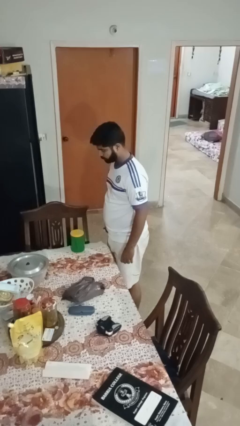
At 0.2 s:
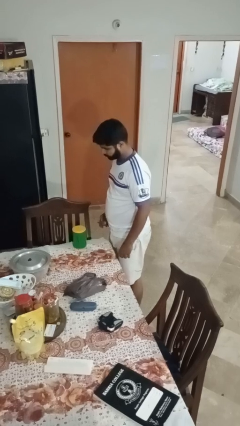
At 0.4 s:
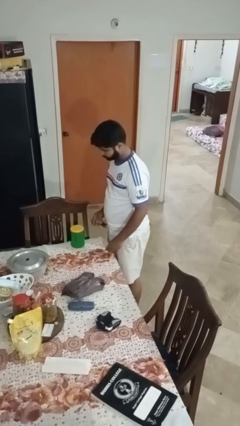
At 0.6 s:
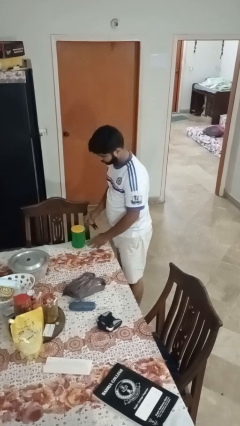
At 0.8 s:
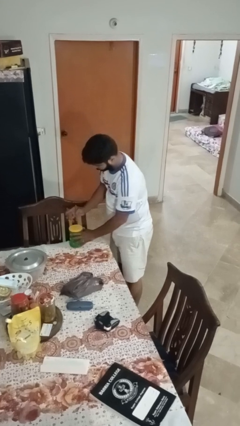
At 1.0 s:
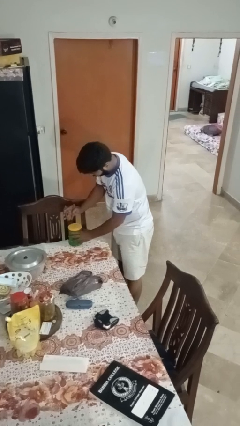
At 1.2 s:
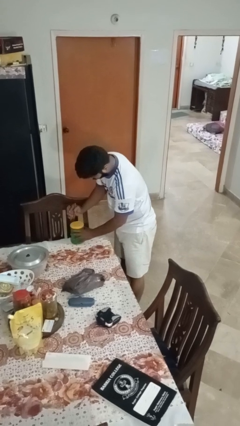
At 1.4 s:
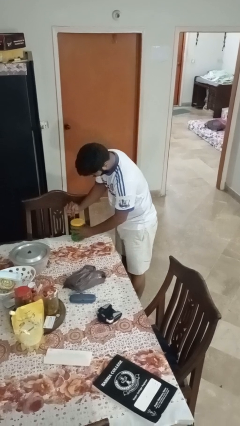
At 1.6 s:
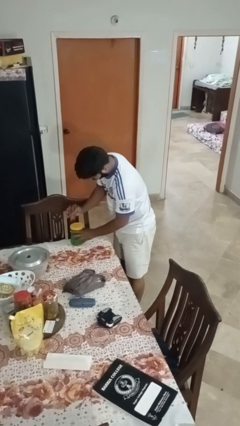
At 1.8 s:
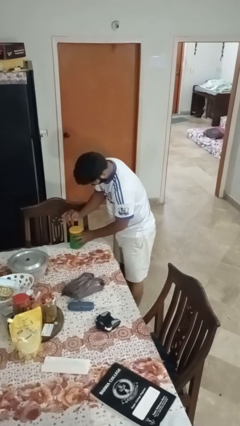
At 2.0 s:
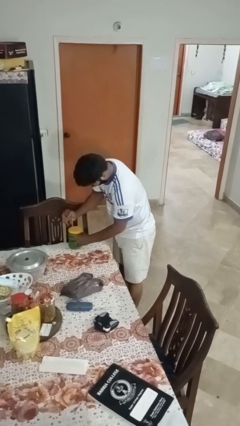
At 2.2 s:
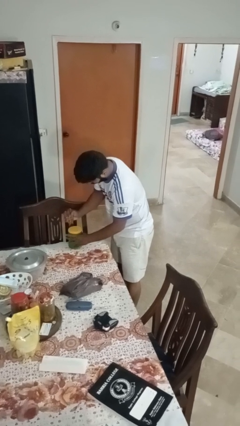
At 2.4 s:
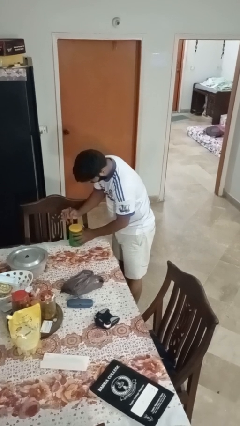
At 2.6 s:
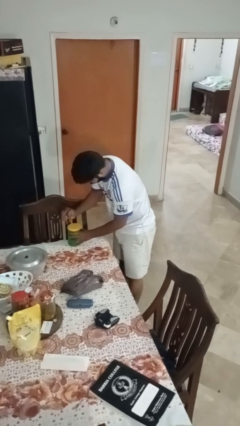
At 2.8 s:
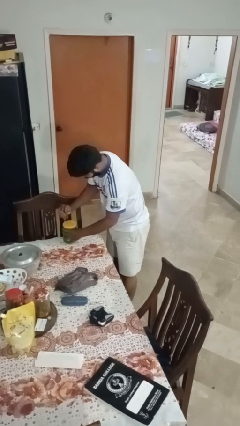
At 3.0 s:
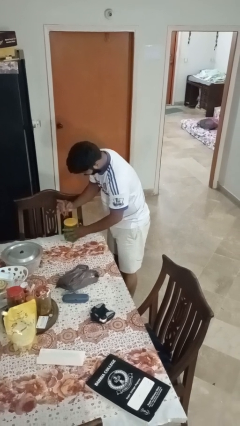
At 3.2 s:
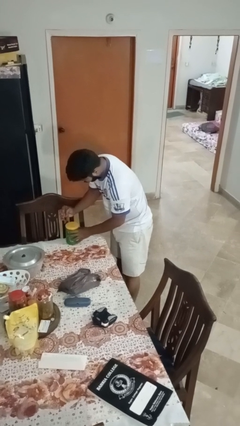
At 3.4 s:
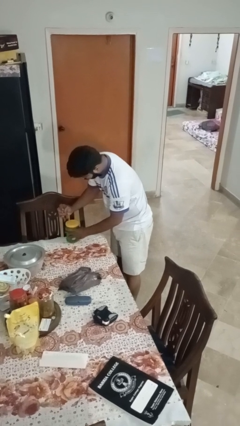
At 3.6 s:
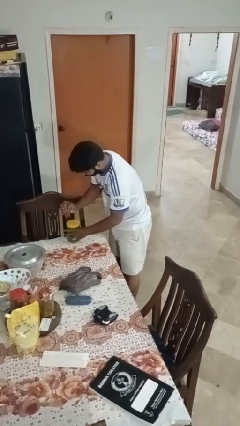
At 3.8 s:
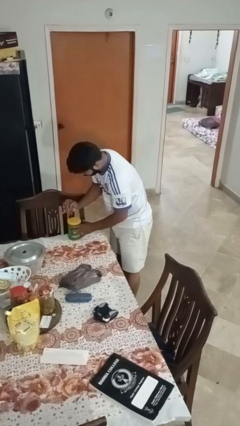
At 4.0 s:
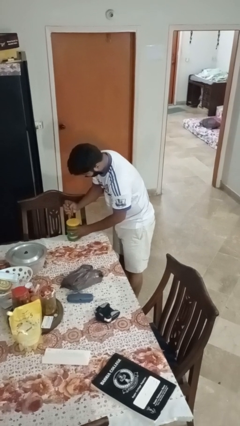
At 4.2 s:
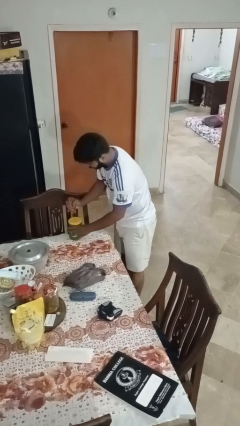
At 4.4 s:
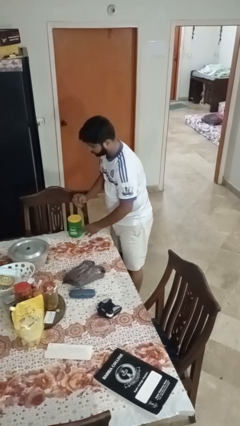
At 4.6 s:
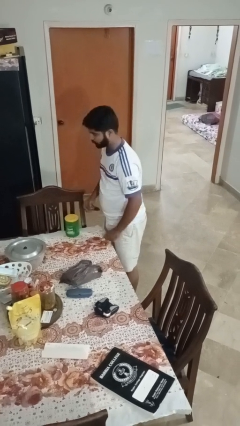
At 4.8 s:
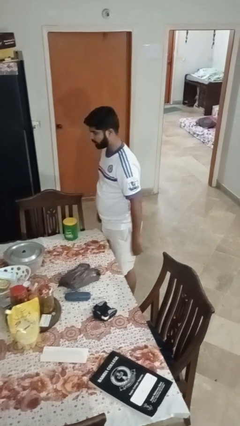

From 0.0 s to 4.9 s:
person opens can with can opener

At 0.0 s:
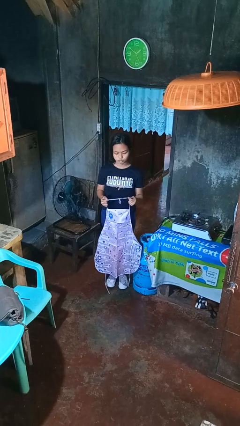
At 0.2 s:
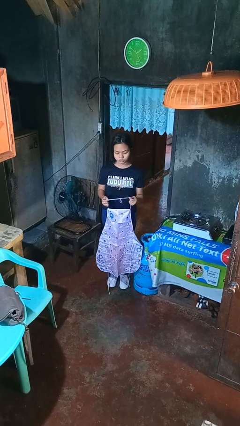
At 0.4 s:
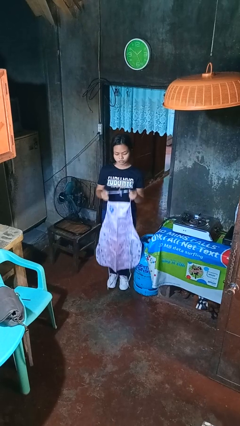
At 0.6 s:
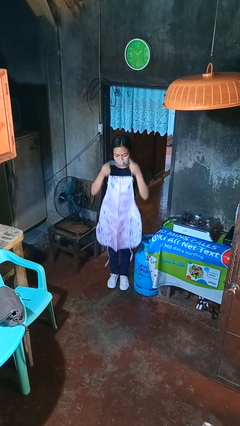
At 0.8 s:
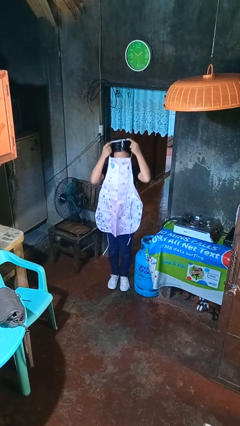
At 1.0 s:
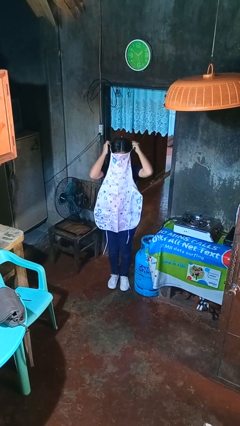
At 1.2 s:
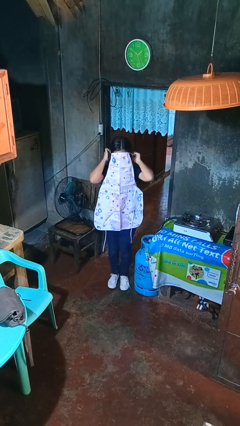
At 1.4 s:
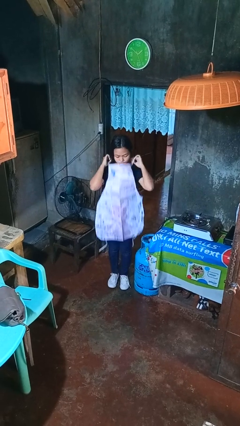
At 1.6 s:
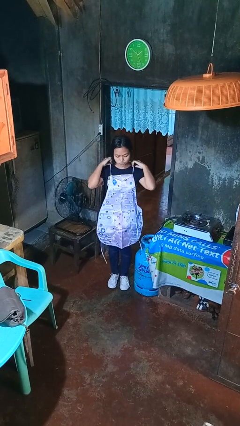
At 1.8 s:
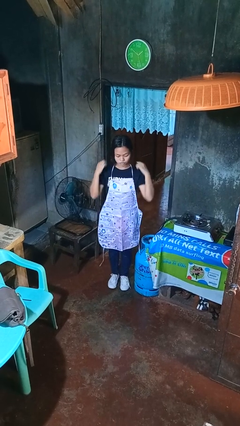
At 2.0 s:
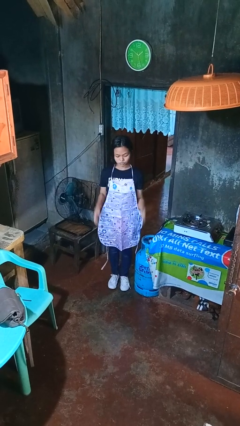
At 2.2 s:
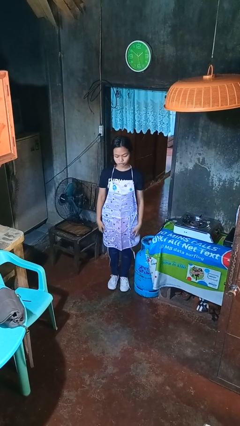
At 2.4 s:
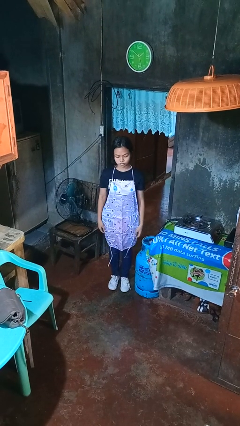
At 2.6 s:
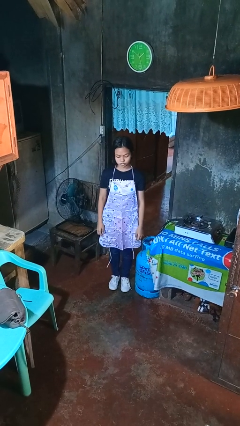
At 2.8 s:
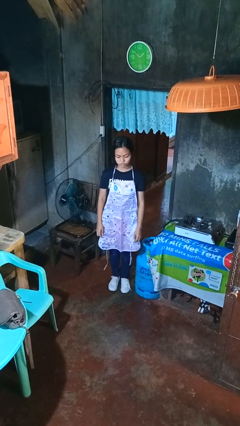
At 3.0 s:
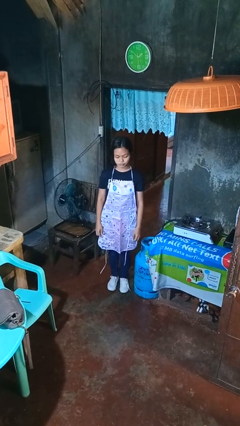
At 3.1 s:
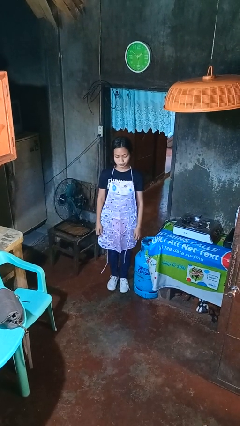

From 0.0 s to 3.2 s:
person puts on apron

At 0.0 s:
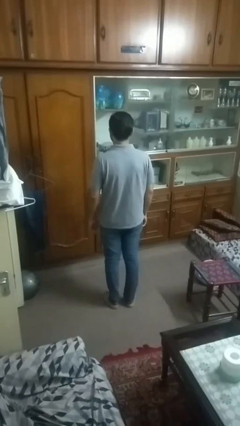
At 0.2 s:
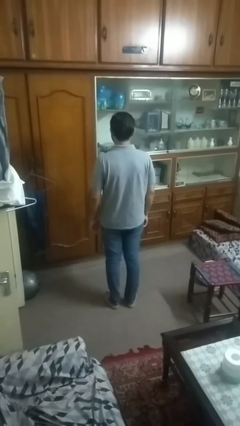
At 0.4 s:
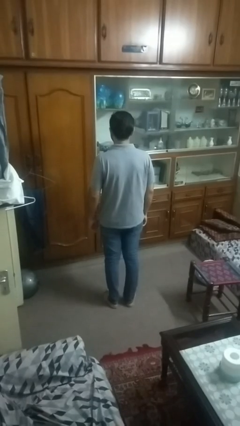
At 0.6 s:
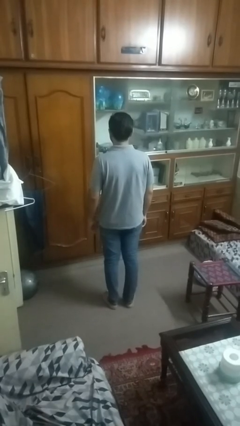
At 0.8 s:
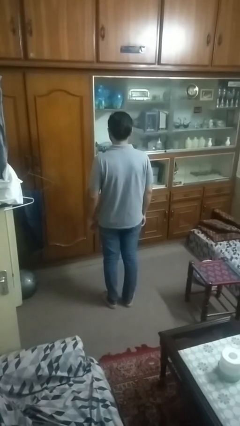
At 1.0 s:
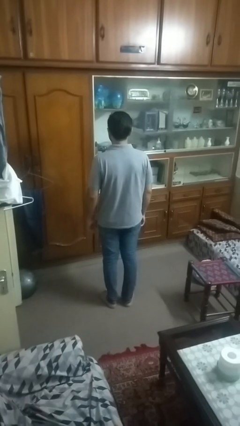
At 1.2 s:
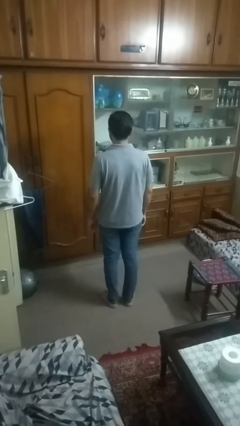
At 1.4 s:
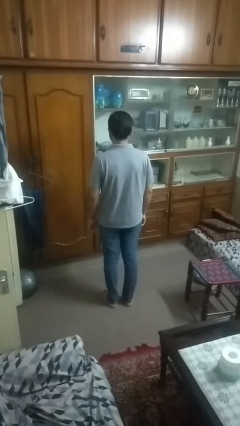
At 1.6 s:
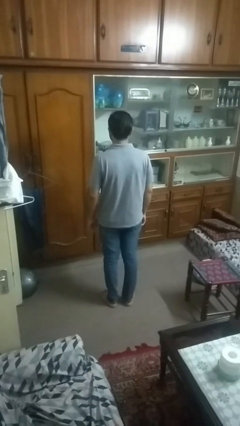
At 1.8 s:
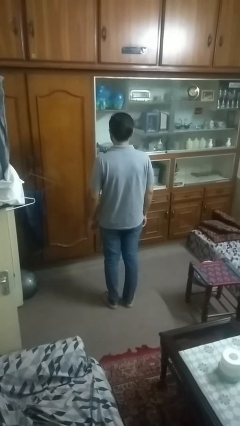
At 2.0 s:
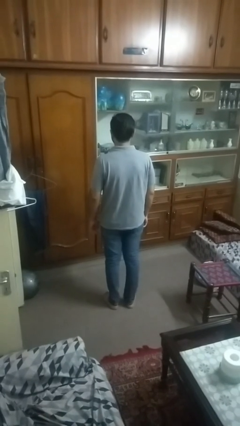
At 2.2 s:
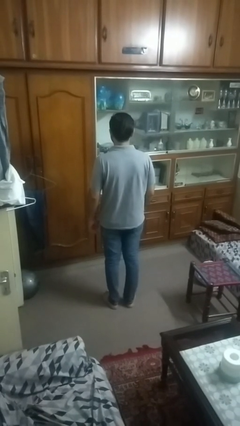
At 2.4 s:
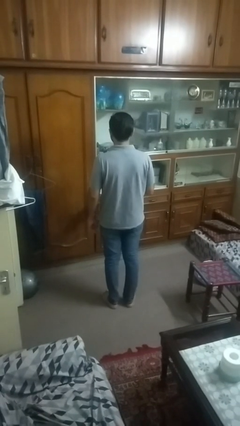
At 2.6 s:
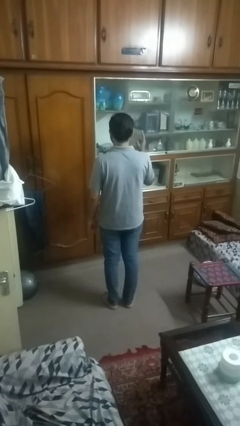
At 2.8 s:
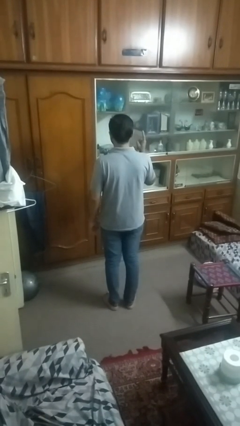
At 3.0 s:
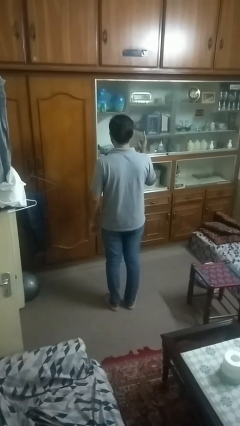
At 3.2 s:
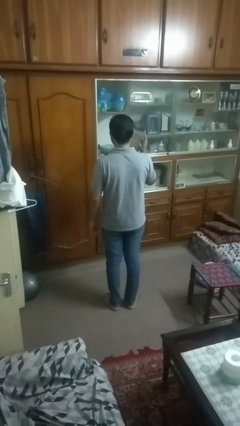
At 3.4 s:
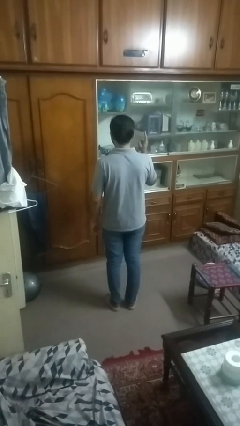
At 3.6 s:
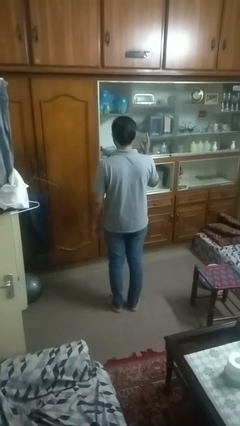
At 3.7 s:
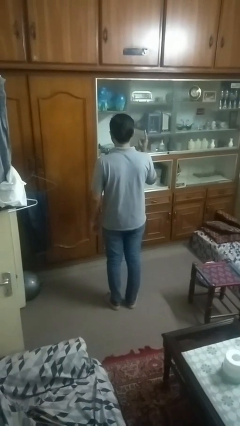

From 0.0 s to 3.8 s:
person gestures number one

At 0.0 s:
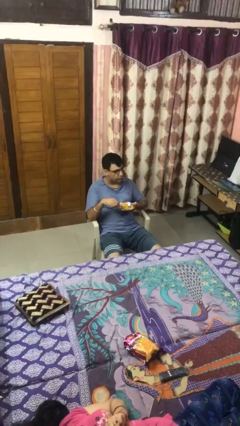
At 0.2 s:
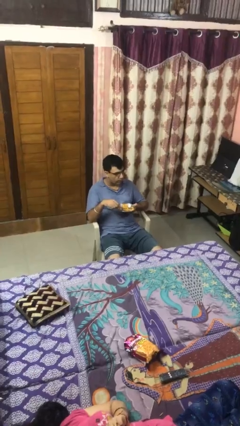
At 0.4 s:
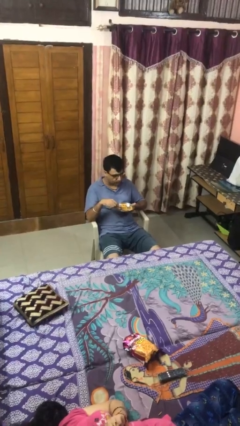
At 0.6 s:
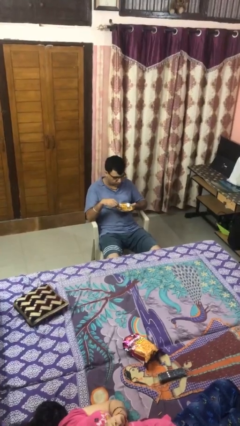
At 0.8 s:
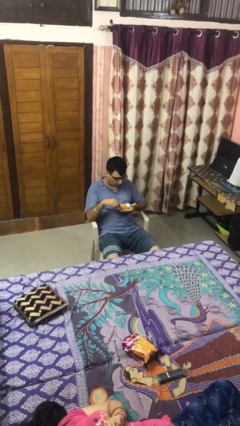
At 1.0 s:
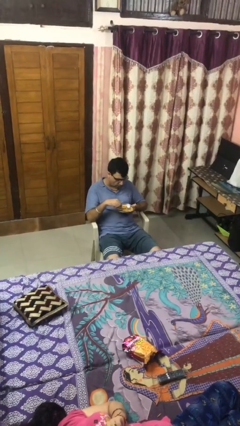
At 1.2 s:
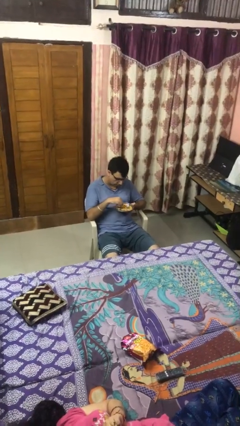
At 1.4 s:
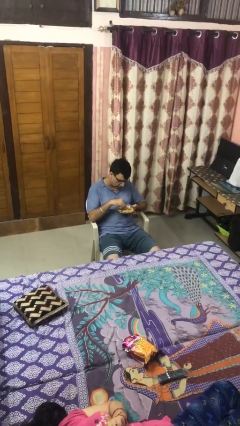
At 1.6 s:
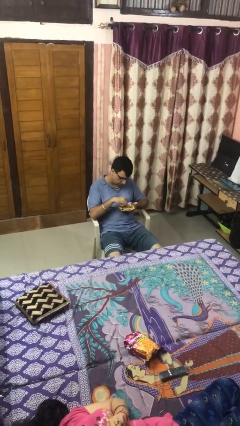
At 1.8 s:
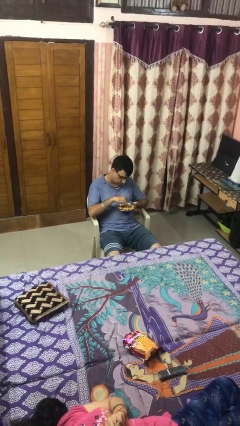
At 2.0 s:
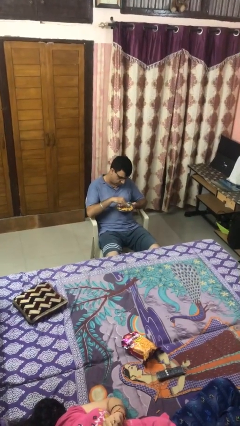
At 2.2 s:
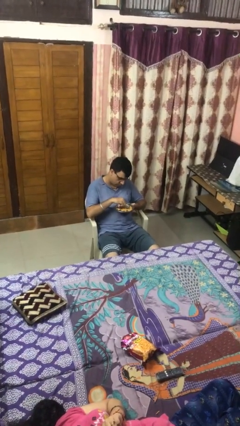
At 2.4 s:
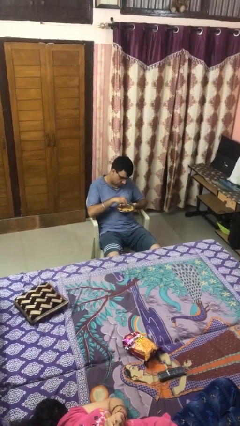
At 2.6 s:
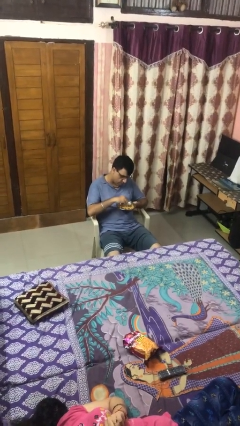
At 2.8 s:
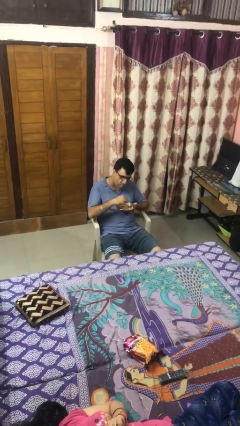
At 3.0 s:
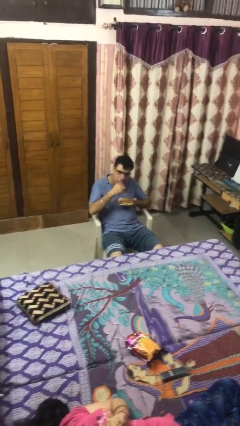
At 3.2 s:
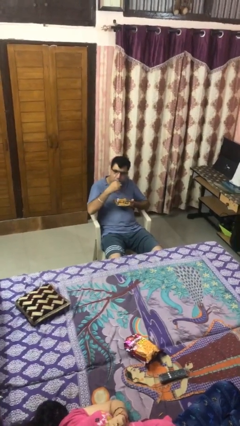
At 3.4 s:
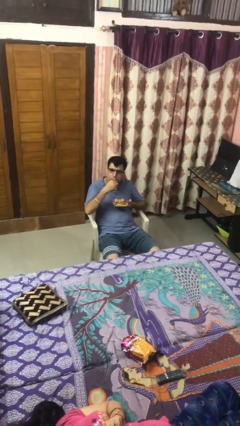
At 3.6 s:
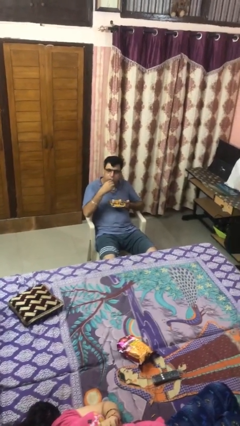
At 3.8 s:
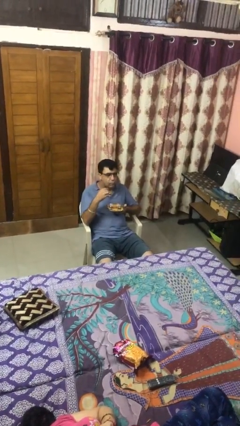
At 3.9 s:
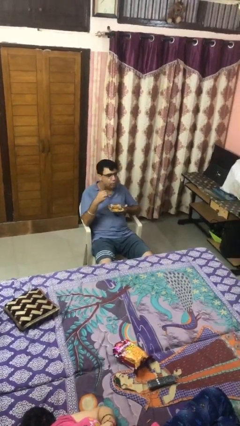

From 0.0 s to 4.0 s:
person eats with hands

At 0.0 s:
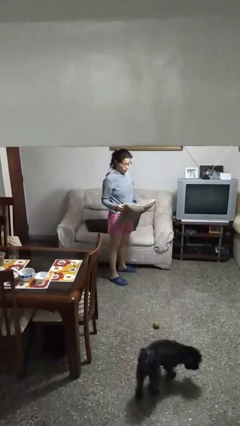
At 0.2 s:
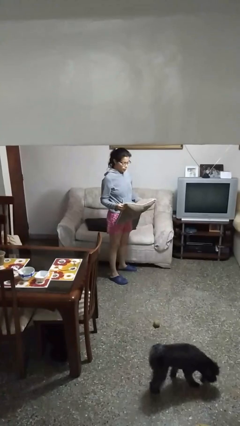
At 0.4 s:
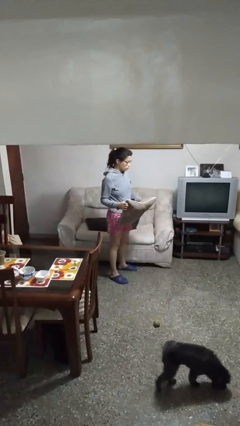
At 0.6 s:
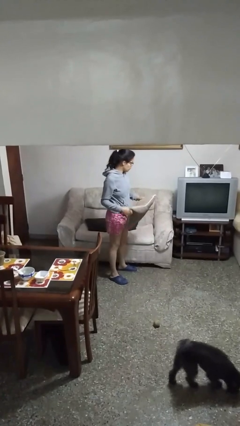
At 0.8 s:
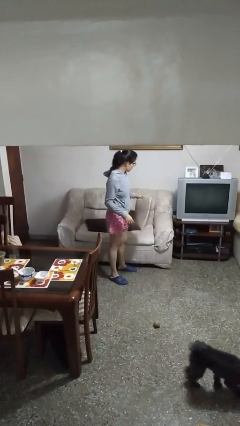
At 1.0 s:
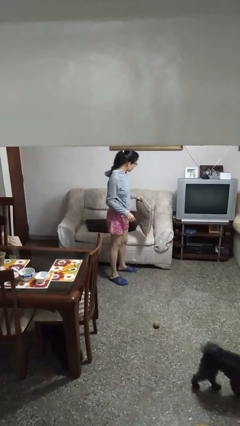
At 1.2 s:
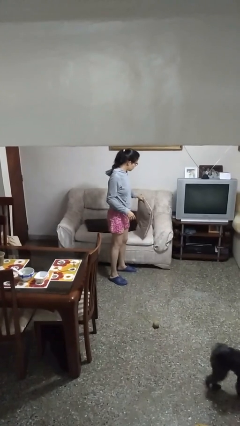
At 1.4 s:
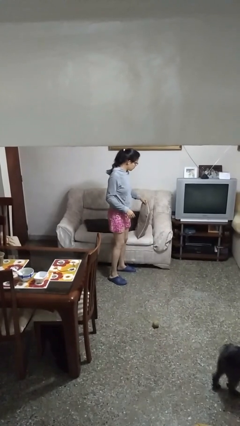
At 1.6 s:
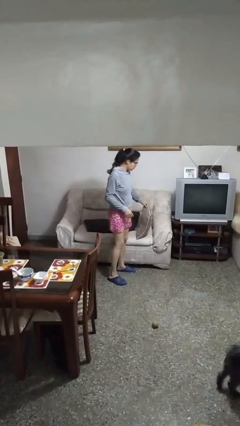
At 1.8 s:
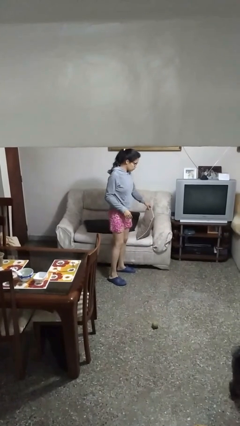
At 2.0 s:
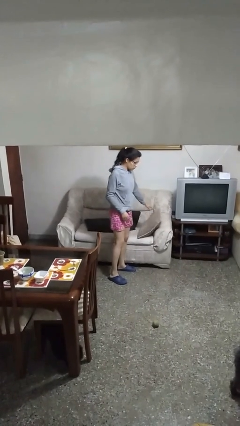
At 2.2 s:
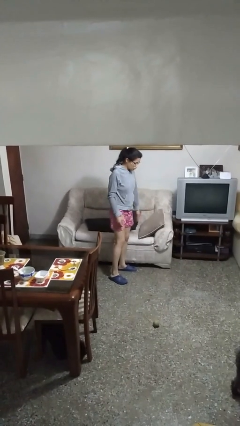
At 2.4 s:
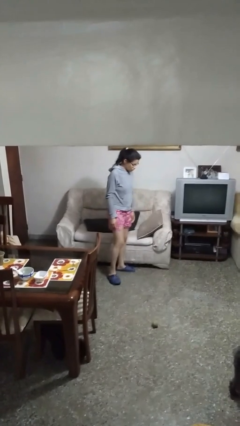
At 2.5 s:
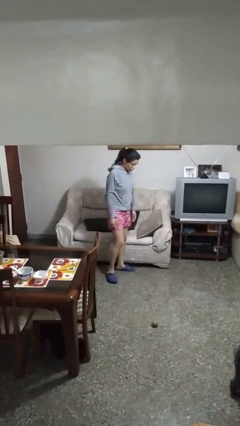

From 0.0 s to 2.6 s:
person puts down object on couch
